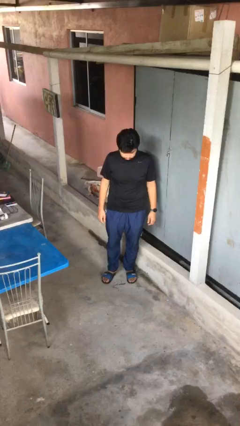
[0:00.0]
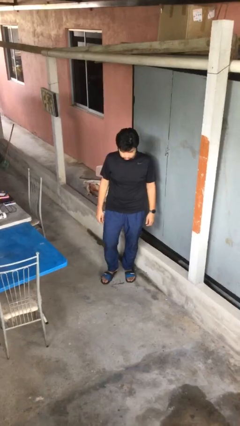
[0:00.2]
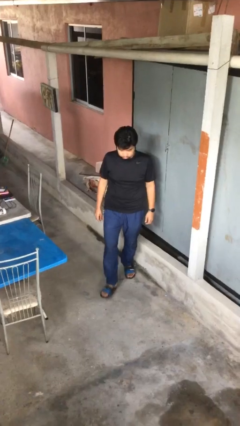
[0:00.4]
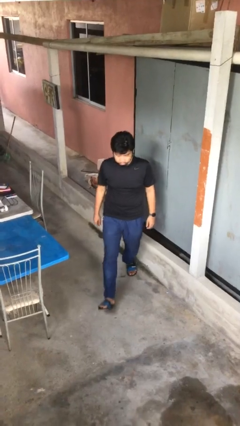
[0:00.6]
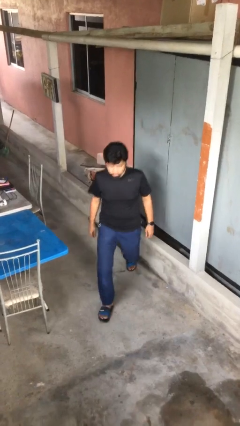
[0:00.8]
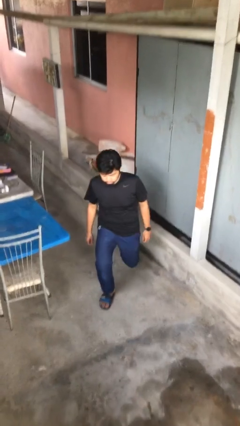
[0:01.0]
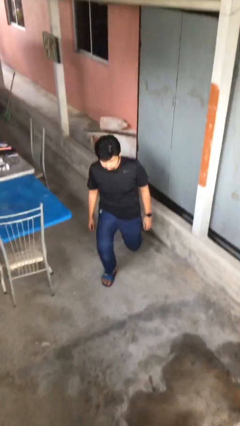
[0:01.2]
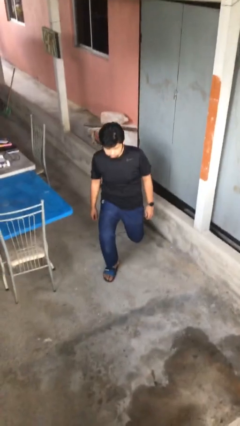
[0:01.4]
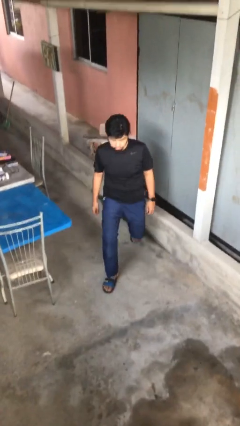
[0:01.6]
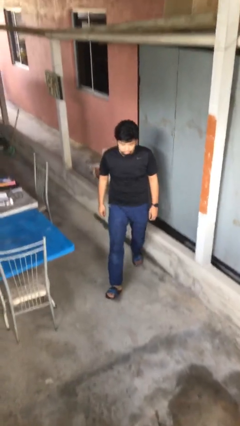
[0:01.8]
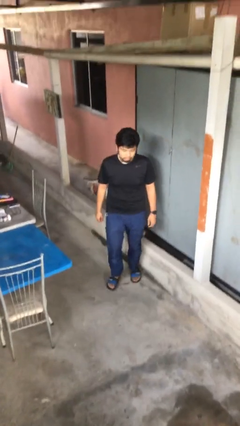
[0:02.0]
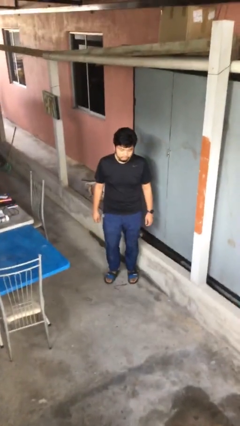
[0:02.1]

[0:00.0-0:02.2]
person exercises with lunges

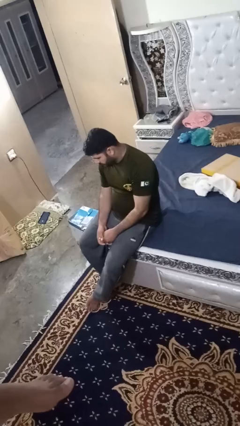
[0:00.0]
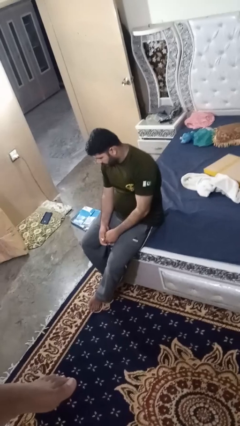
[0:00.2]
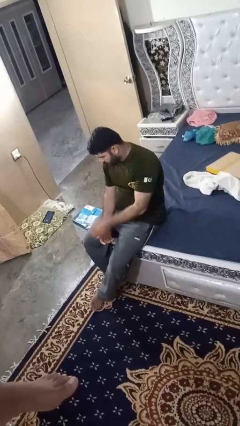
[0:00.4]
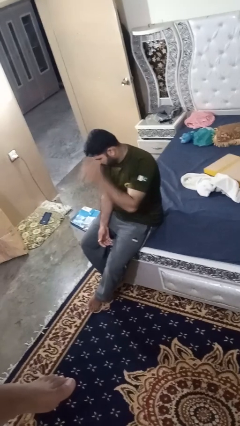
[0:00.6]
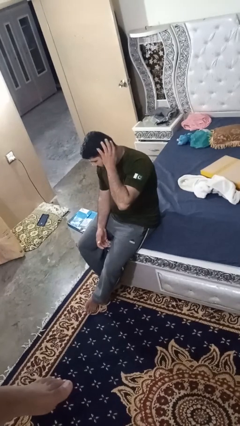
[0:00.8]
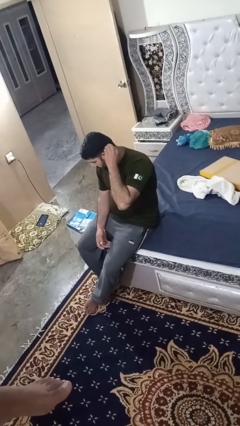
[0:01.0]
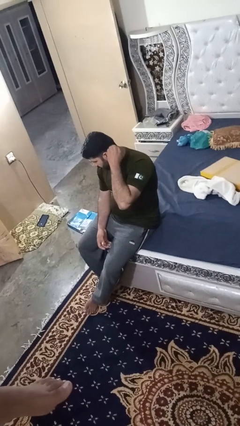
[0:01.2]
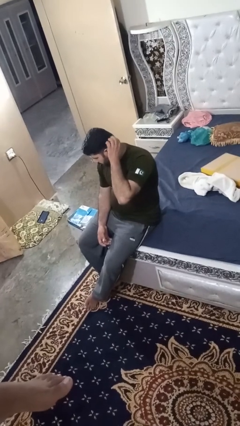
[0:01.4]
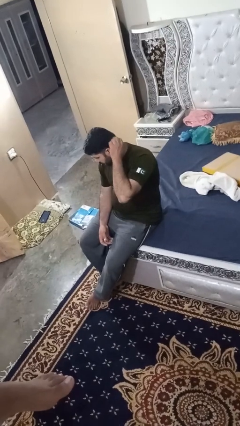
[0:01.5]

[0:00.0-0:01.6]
person strokes hair

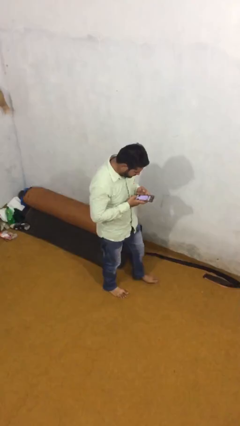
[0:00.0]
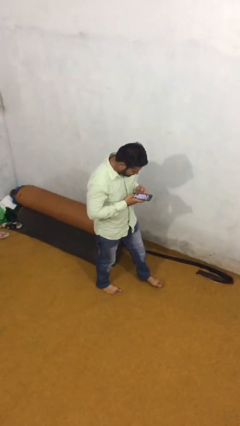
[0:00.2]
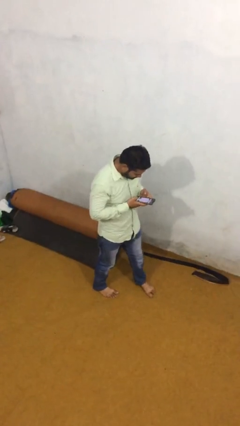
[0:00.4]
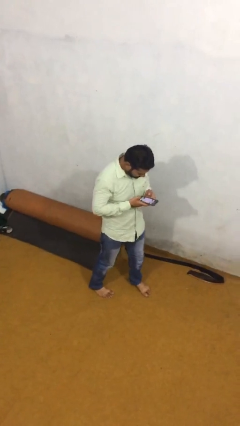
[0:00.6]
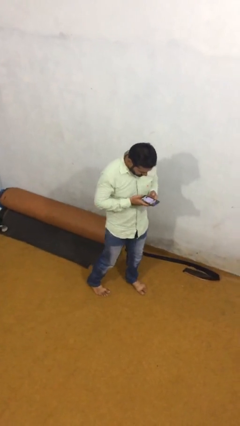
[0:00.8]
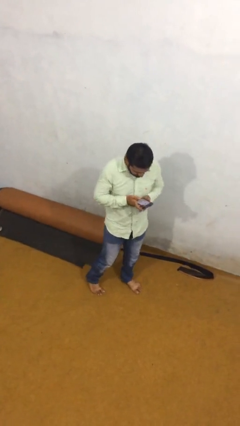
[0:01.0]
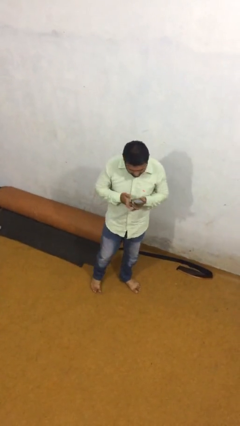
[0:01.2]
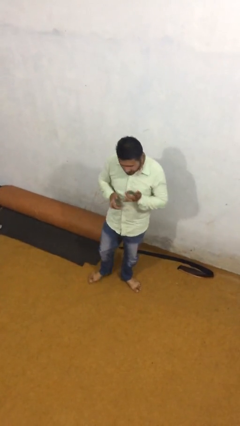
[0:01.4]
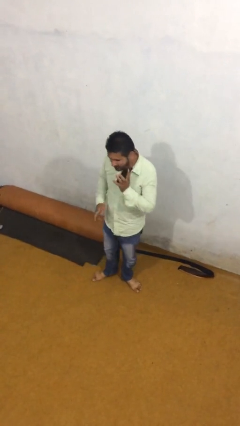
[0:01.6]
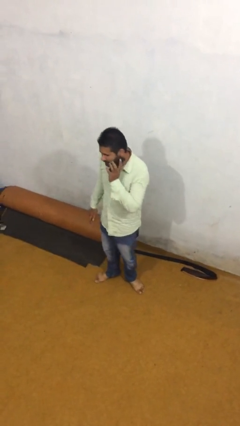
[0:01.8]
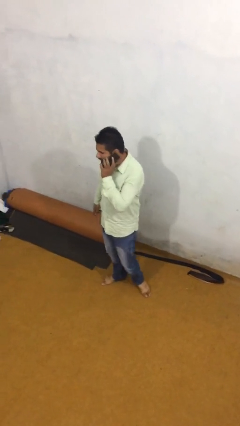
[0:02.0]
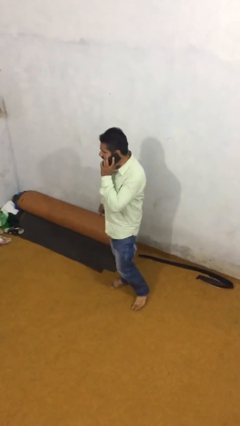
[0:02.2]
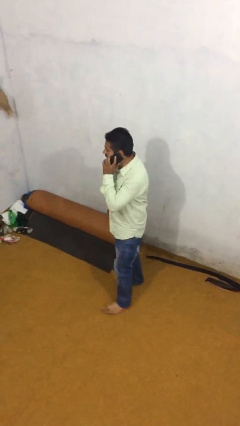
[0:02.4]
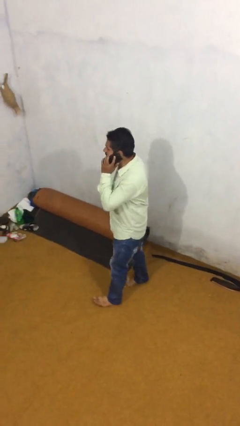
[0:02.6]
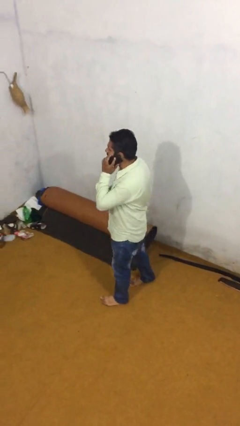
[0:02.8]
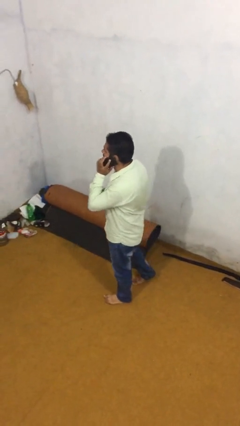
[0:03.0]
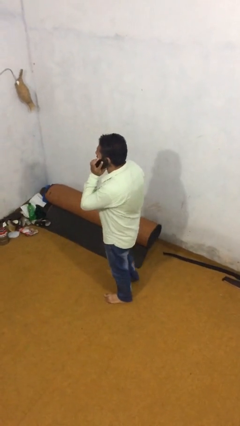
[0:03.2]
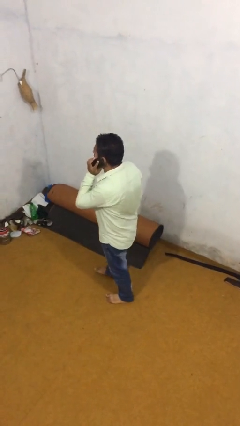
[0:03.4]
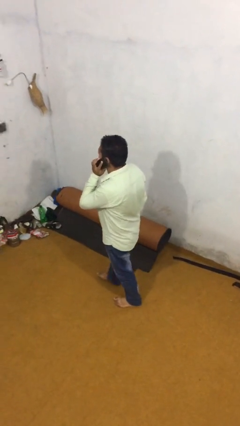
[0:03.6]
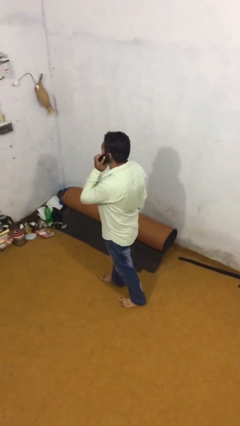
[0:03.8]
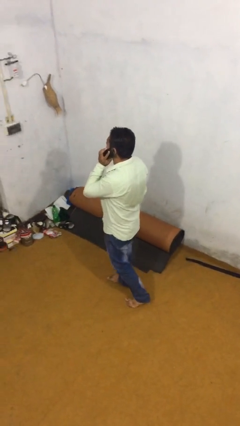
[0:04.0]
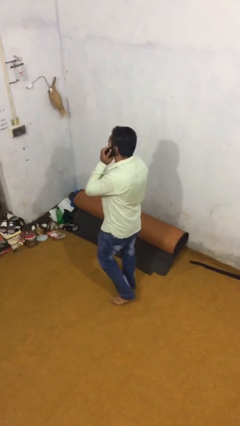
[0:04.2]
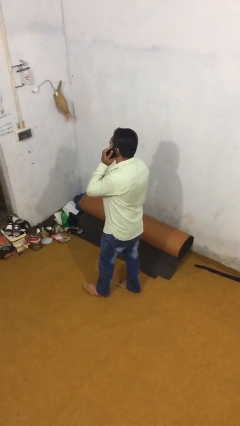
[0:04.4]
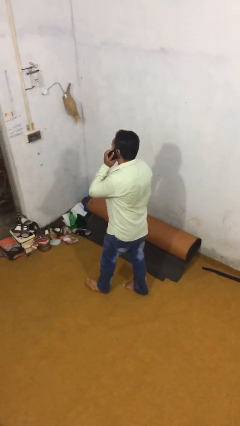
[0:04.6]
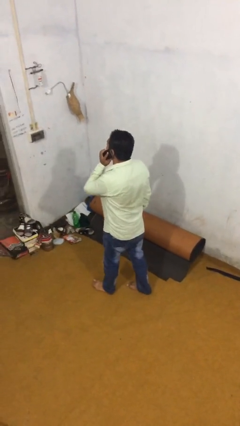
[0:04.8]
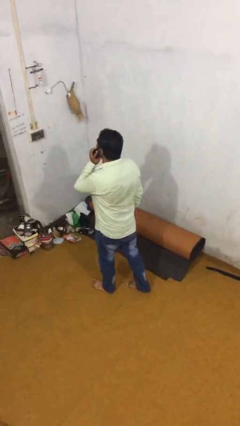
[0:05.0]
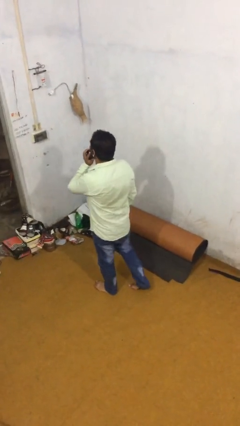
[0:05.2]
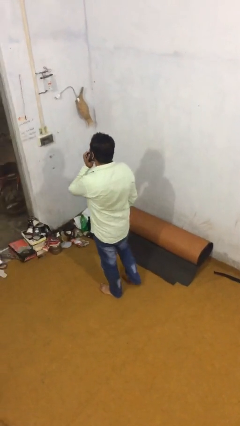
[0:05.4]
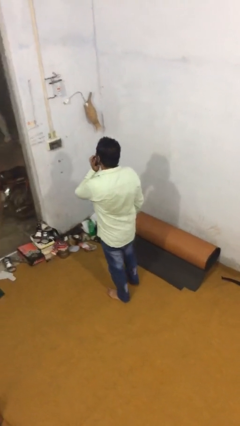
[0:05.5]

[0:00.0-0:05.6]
person talks on phone

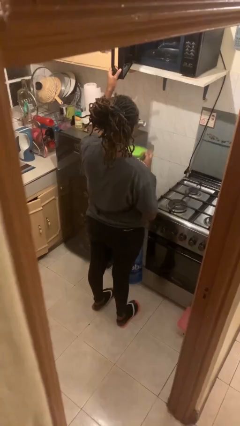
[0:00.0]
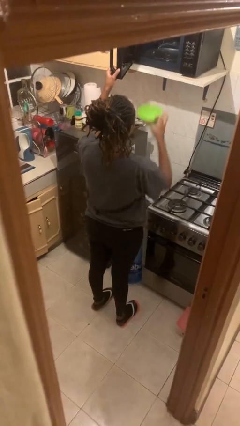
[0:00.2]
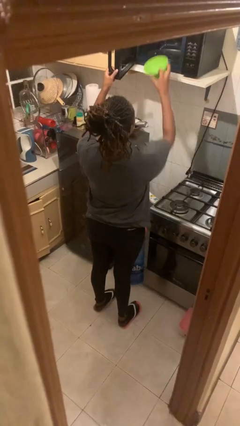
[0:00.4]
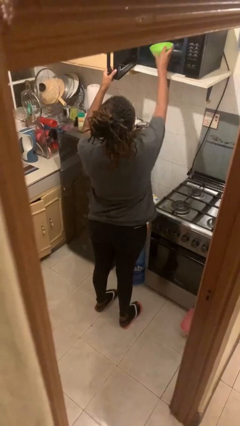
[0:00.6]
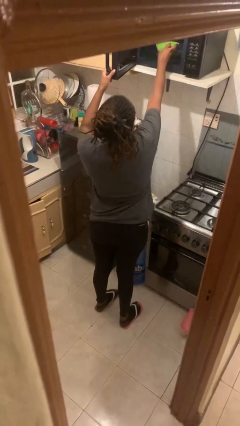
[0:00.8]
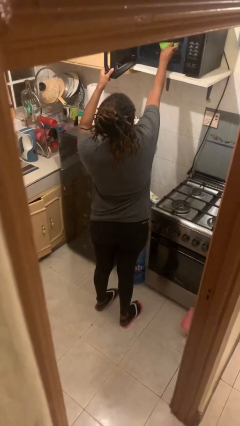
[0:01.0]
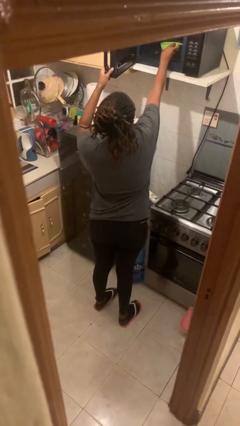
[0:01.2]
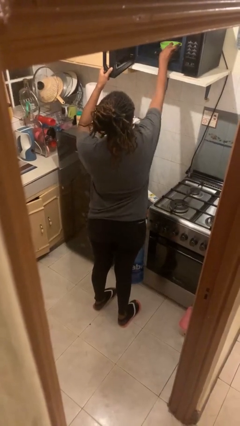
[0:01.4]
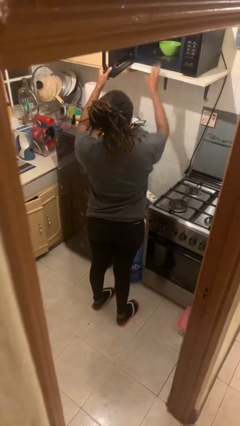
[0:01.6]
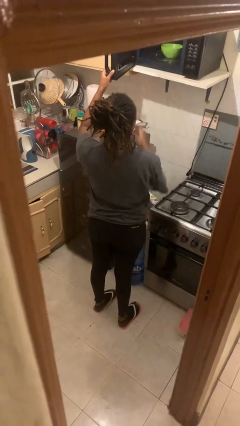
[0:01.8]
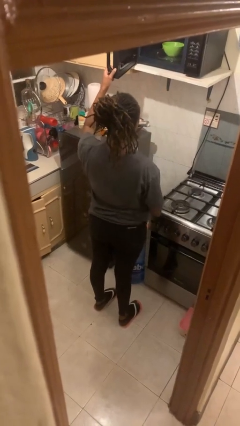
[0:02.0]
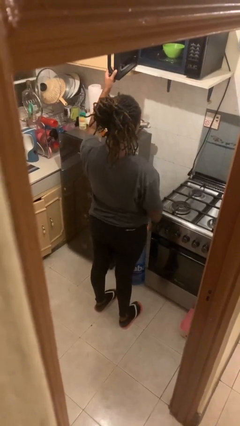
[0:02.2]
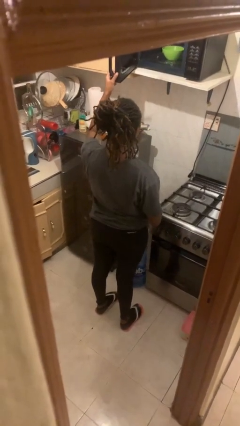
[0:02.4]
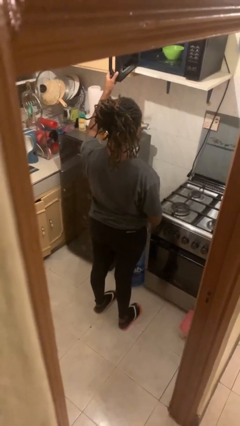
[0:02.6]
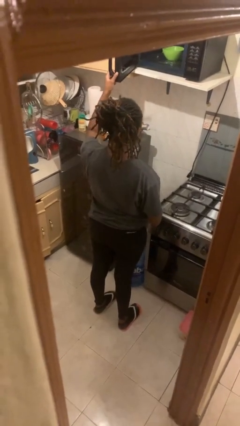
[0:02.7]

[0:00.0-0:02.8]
person puts object into microwave

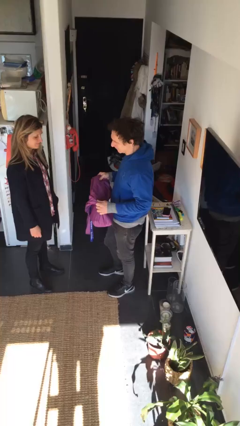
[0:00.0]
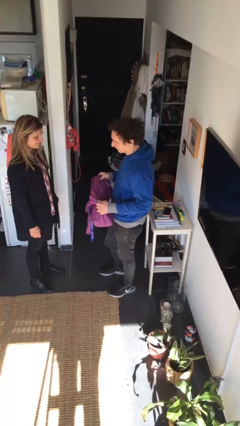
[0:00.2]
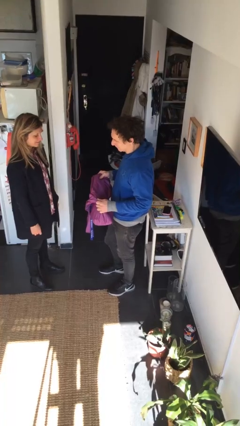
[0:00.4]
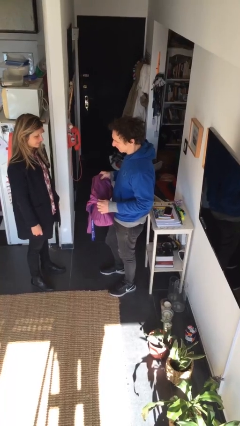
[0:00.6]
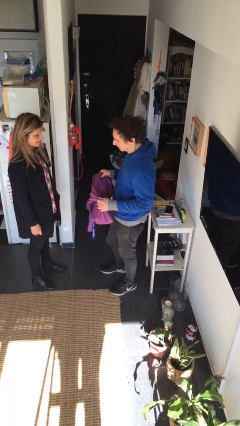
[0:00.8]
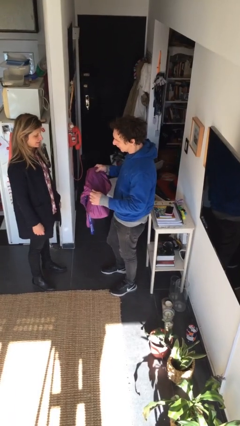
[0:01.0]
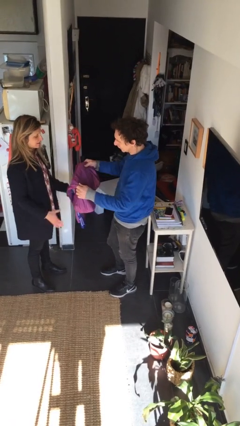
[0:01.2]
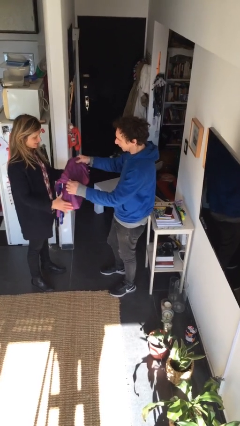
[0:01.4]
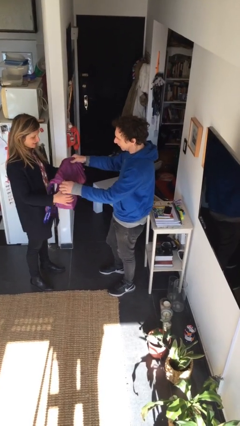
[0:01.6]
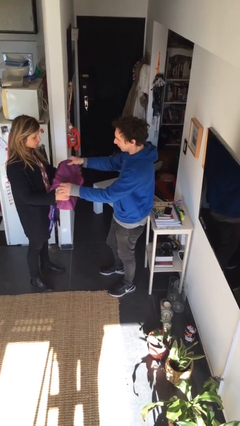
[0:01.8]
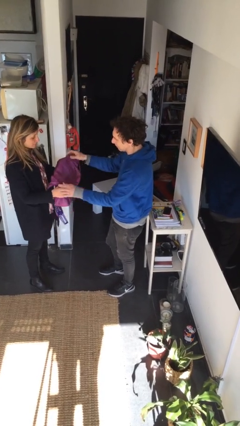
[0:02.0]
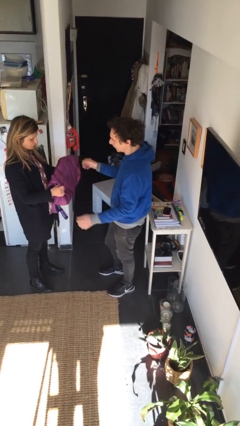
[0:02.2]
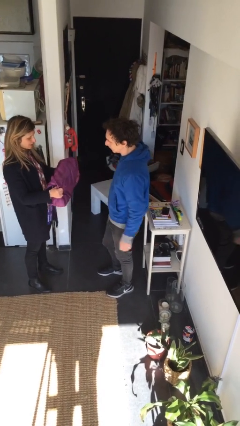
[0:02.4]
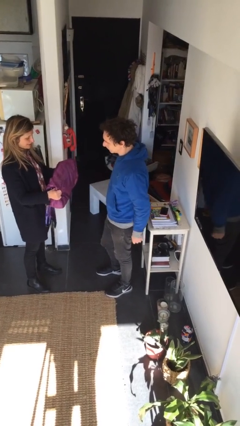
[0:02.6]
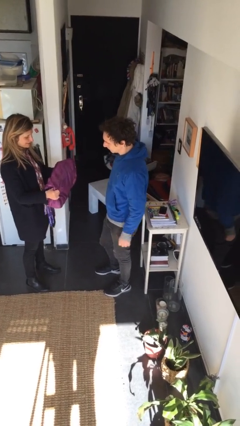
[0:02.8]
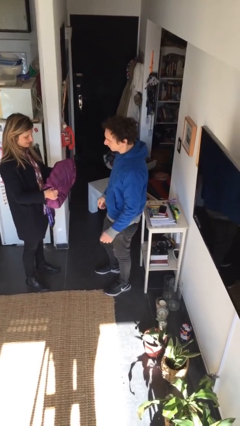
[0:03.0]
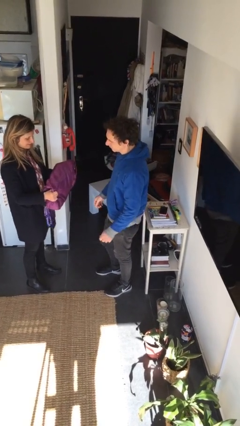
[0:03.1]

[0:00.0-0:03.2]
person transfers object to person

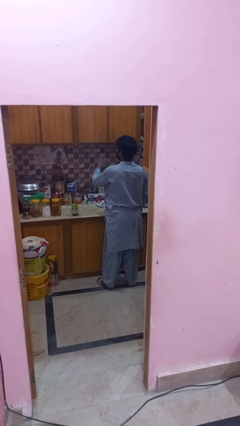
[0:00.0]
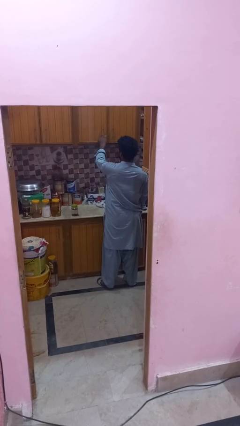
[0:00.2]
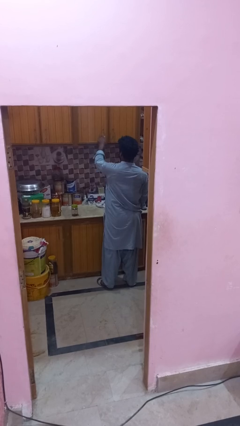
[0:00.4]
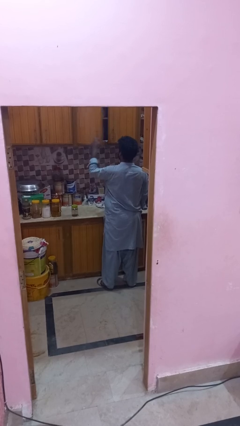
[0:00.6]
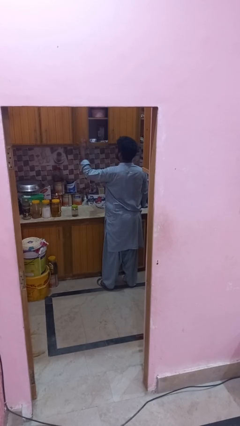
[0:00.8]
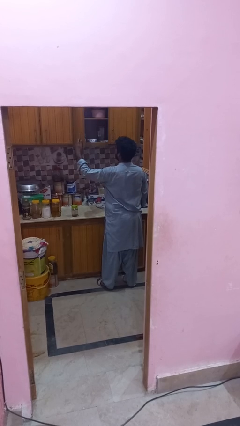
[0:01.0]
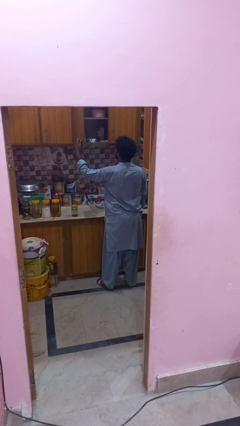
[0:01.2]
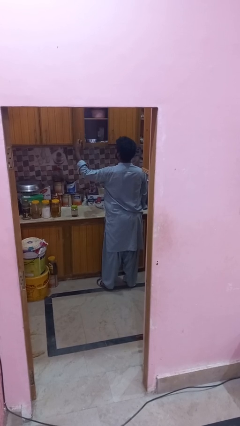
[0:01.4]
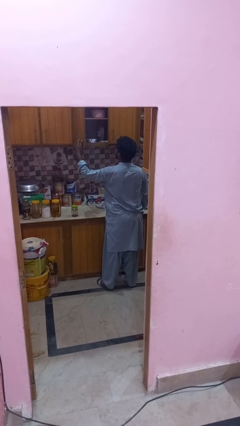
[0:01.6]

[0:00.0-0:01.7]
person opens cabinet

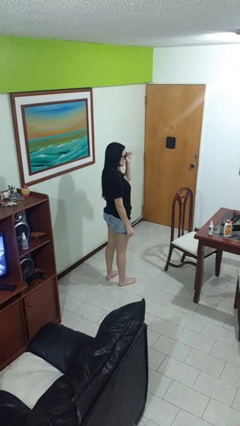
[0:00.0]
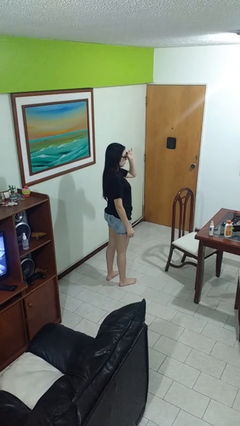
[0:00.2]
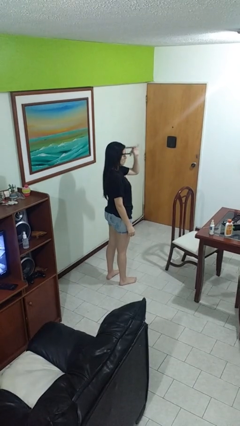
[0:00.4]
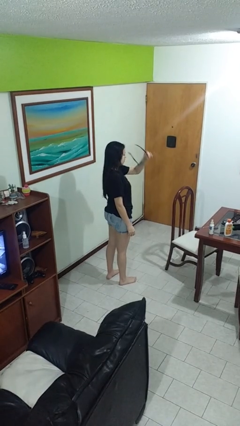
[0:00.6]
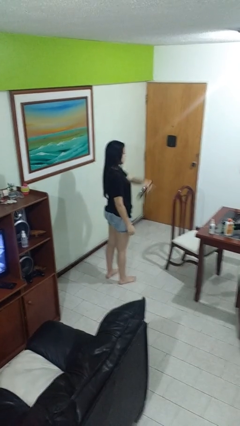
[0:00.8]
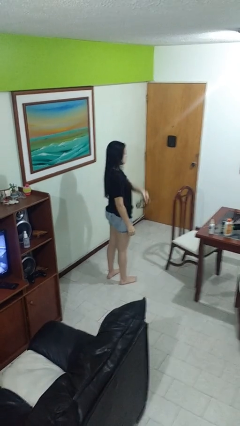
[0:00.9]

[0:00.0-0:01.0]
person takes off sunglasses
